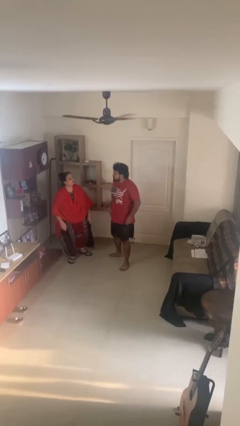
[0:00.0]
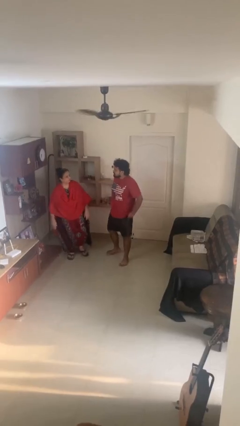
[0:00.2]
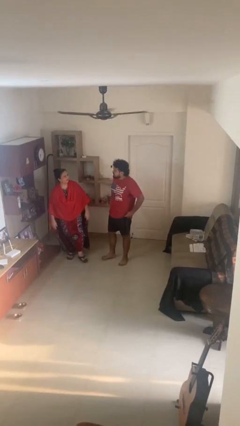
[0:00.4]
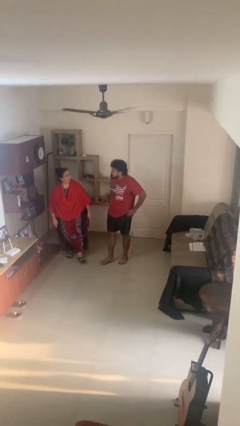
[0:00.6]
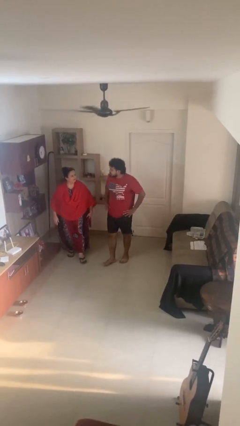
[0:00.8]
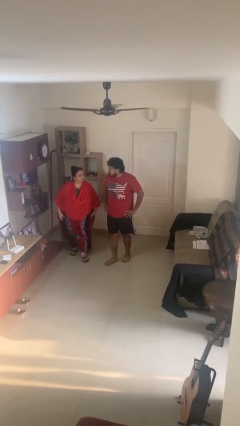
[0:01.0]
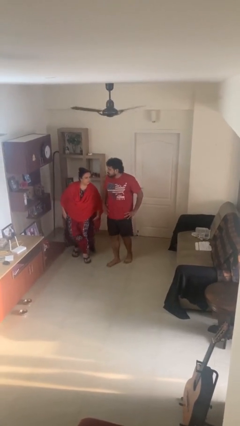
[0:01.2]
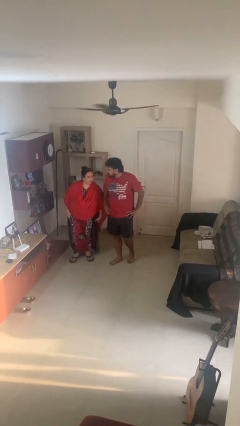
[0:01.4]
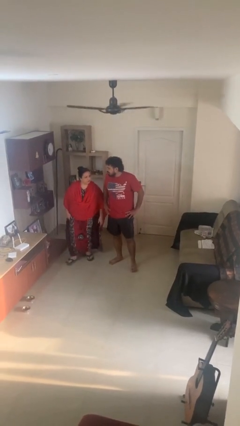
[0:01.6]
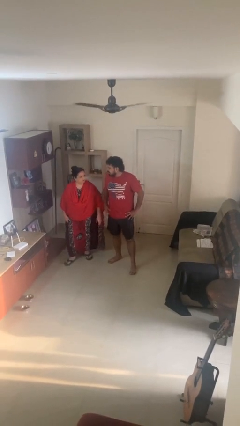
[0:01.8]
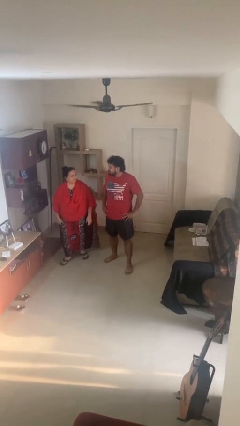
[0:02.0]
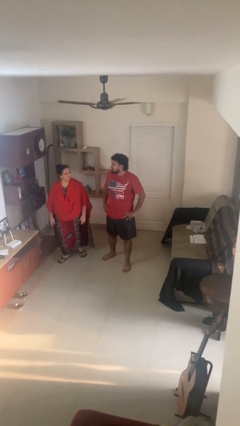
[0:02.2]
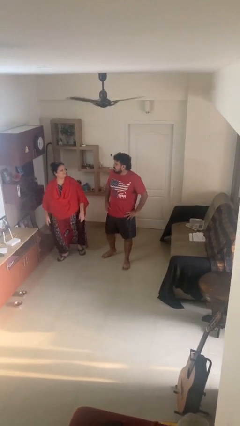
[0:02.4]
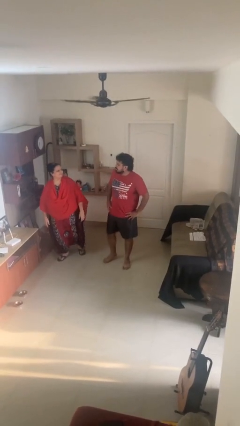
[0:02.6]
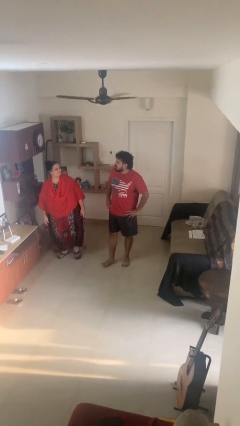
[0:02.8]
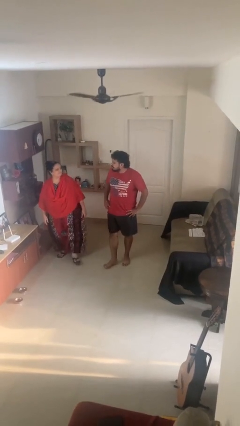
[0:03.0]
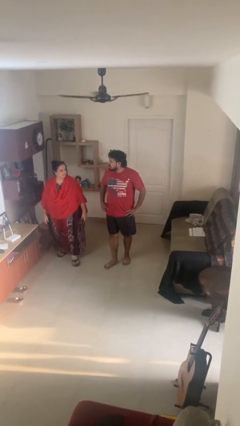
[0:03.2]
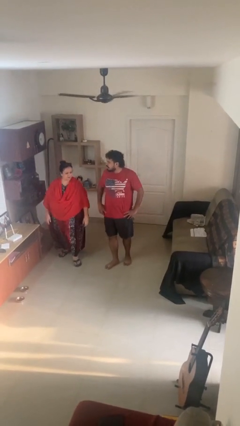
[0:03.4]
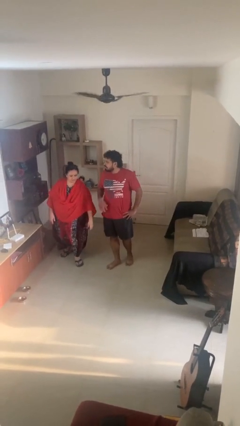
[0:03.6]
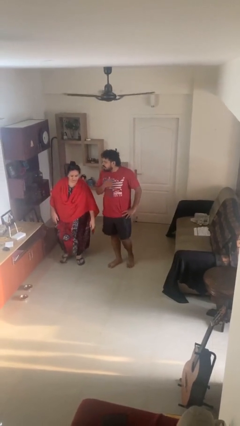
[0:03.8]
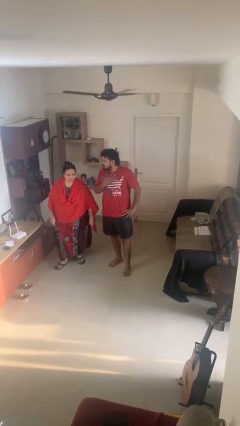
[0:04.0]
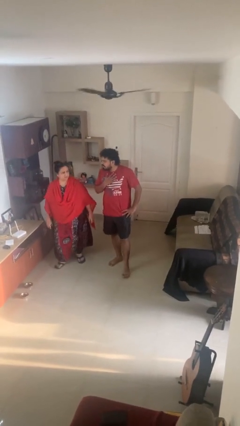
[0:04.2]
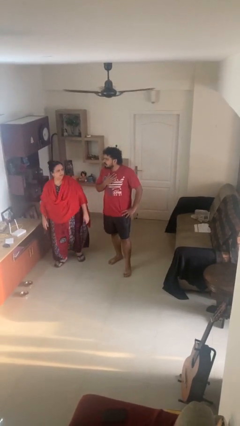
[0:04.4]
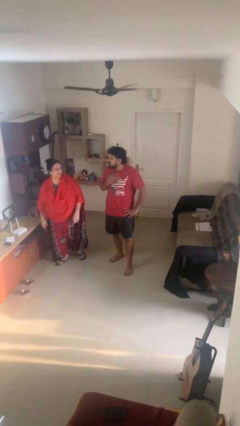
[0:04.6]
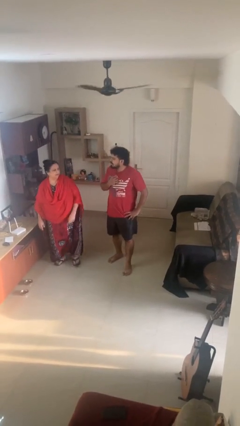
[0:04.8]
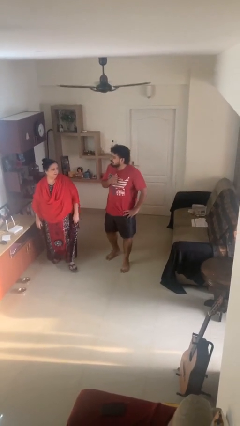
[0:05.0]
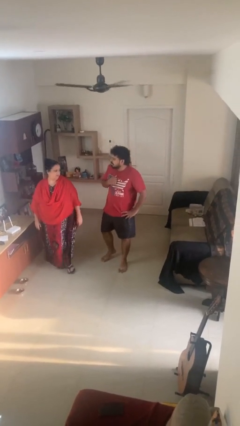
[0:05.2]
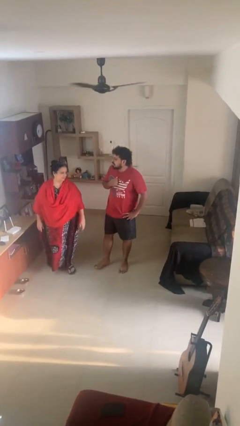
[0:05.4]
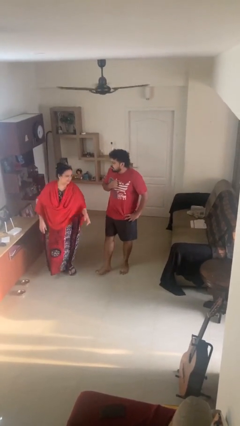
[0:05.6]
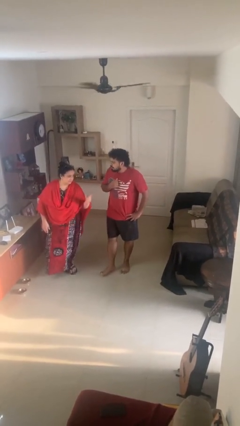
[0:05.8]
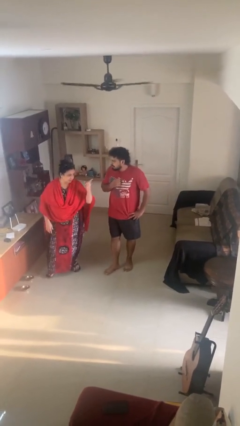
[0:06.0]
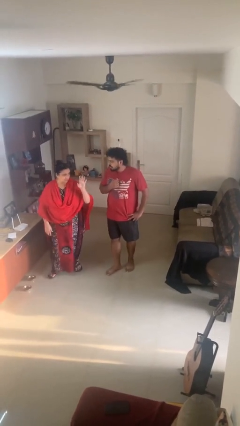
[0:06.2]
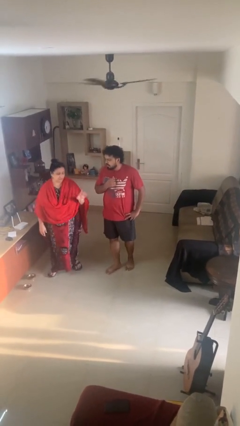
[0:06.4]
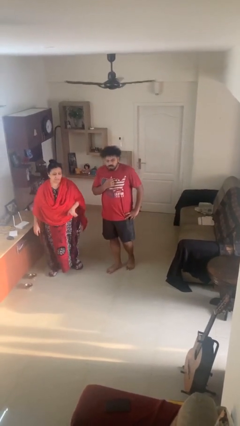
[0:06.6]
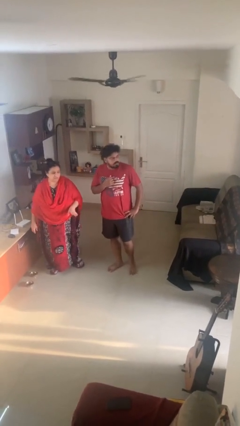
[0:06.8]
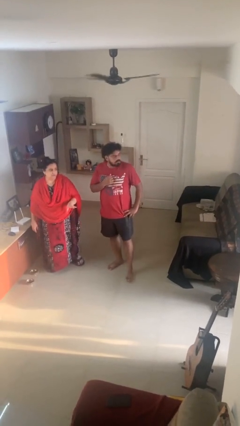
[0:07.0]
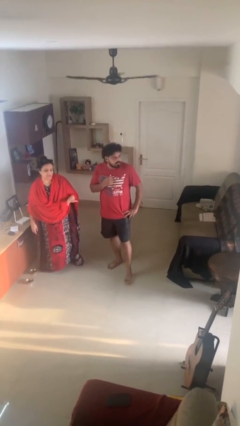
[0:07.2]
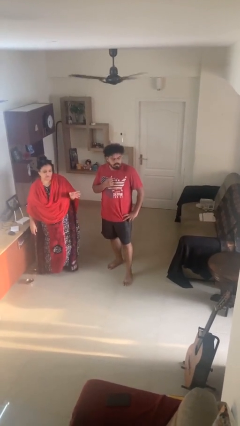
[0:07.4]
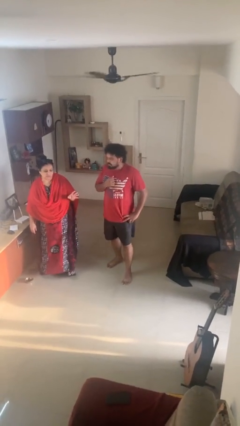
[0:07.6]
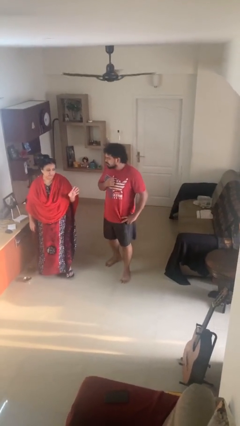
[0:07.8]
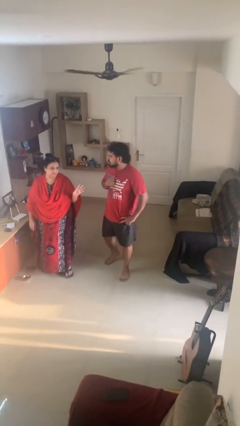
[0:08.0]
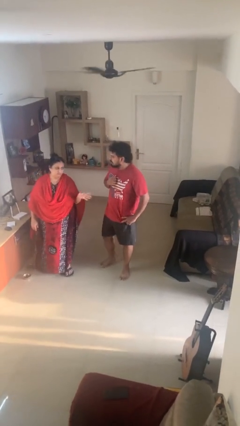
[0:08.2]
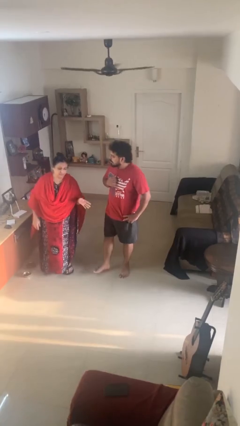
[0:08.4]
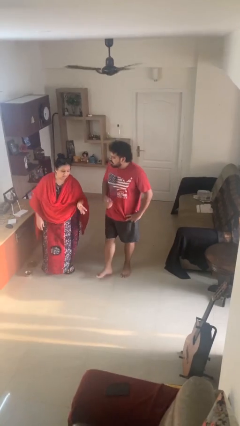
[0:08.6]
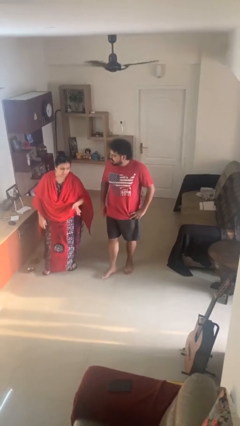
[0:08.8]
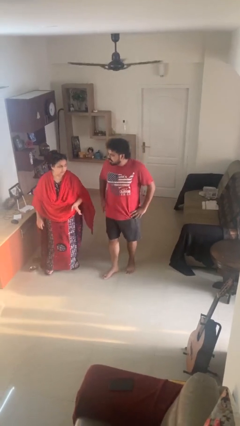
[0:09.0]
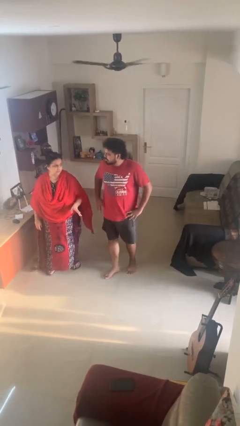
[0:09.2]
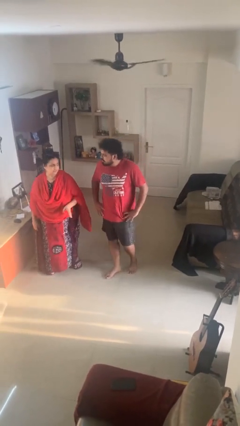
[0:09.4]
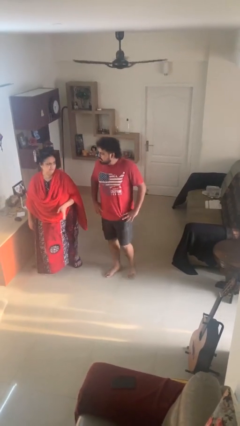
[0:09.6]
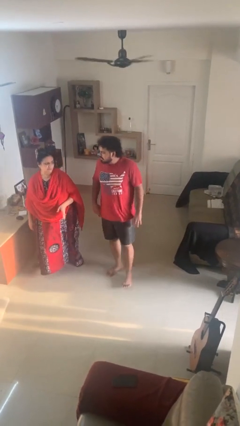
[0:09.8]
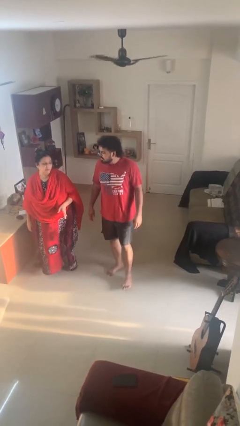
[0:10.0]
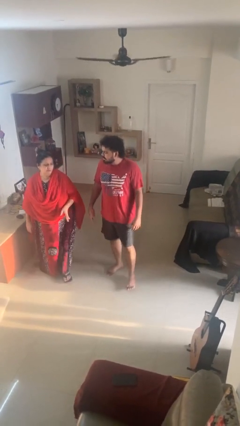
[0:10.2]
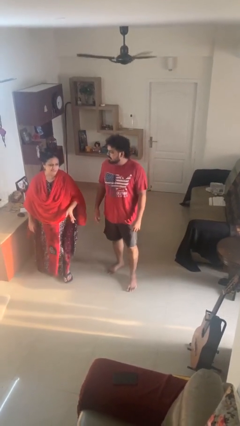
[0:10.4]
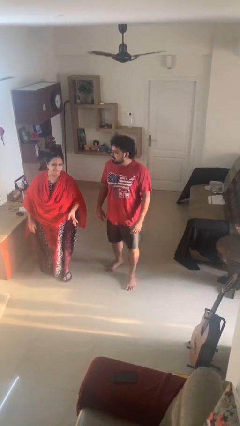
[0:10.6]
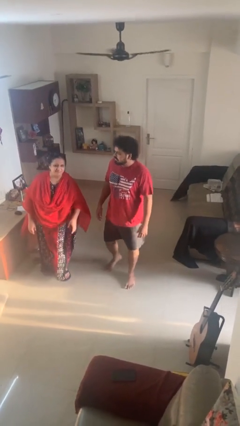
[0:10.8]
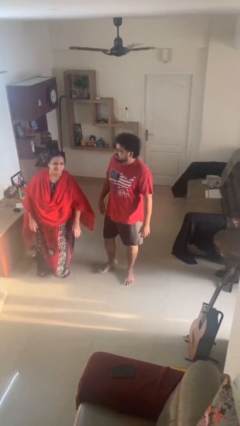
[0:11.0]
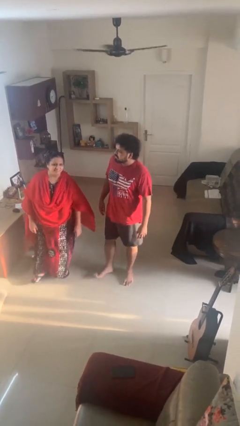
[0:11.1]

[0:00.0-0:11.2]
person talks to person

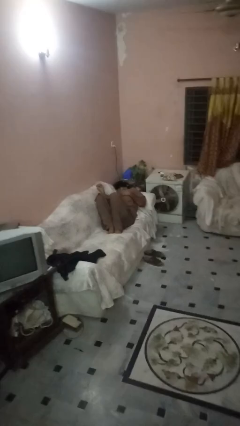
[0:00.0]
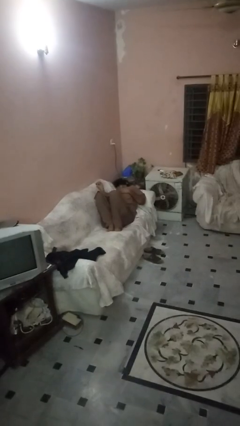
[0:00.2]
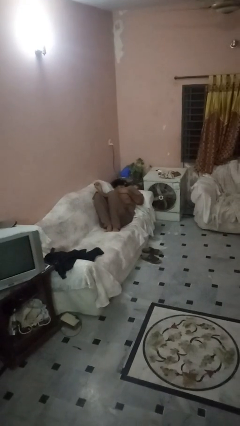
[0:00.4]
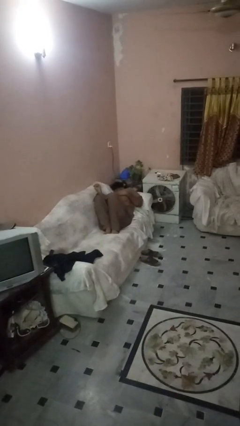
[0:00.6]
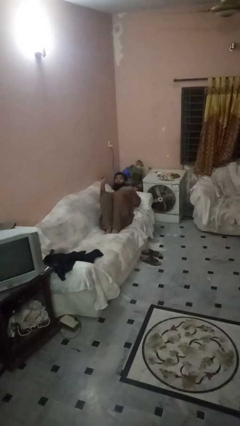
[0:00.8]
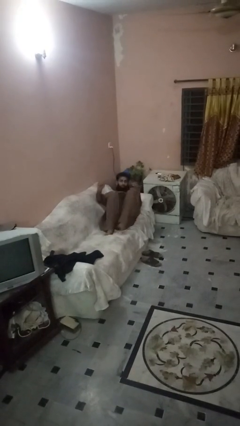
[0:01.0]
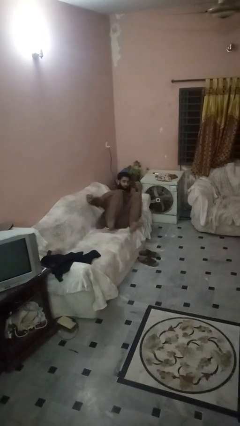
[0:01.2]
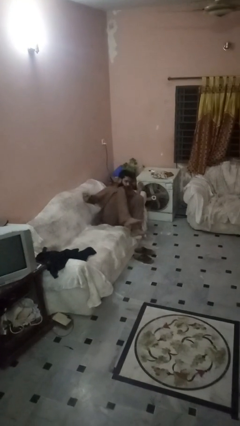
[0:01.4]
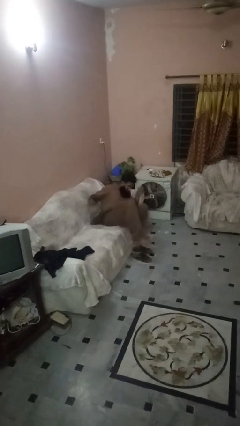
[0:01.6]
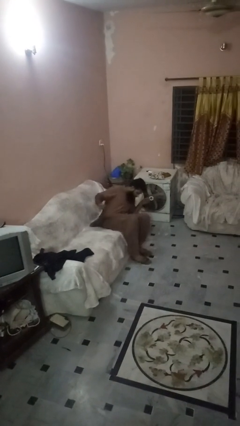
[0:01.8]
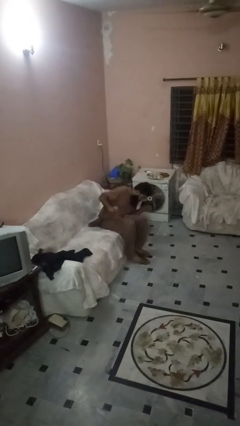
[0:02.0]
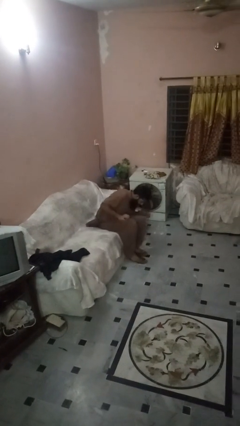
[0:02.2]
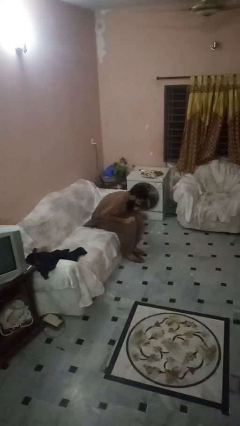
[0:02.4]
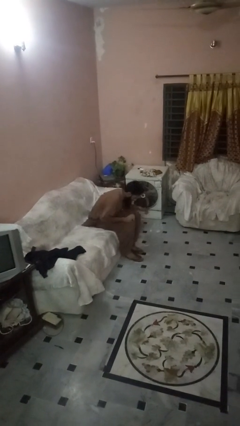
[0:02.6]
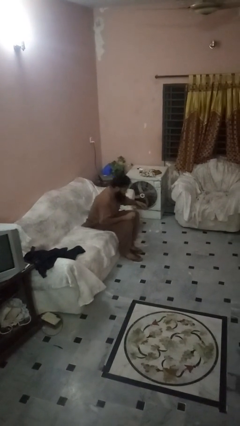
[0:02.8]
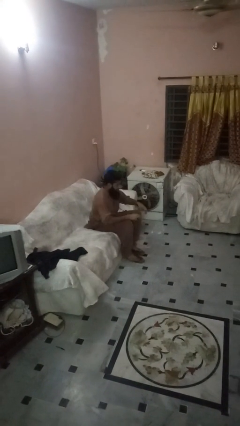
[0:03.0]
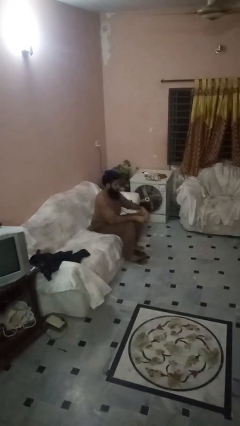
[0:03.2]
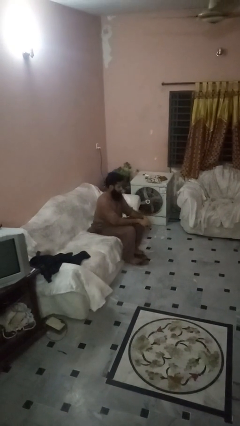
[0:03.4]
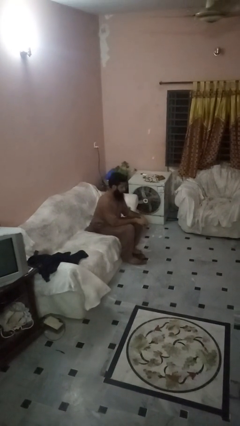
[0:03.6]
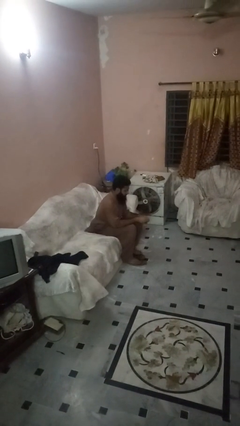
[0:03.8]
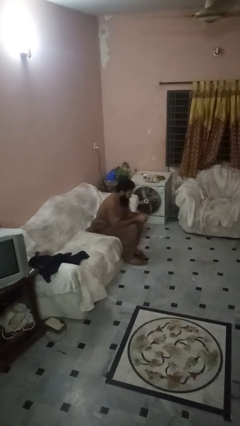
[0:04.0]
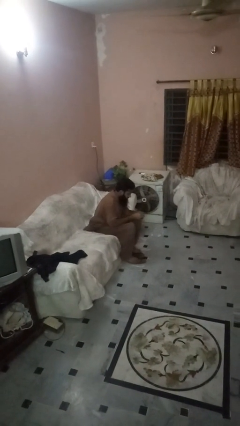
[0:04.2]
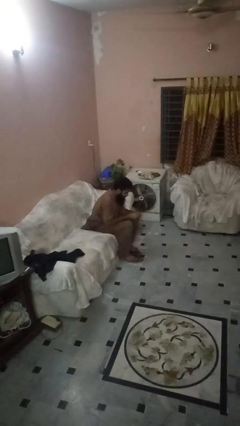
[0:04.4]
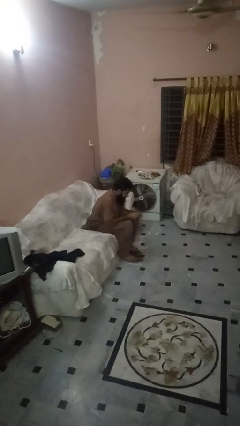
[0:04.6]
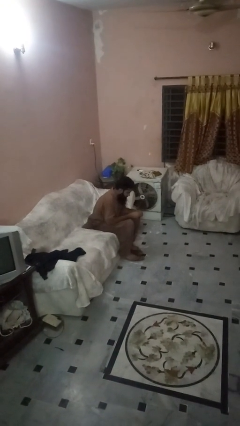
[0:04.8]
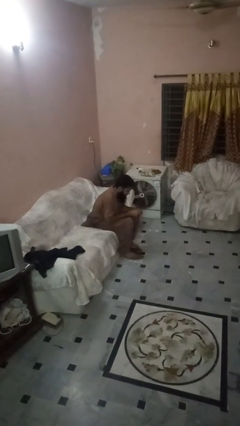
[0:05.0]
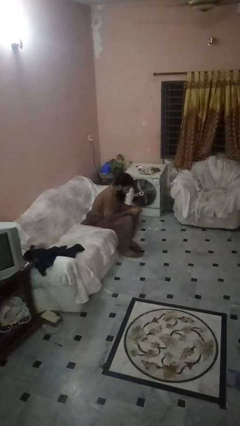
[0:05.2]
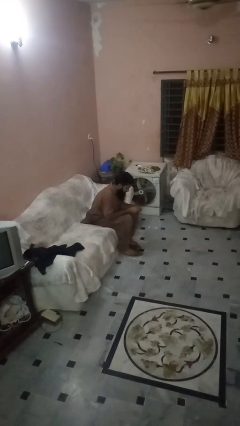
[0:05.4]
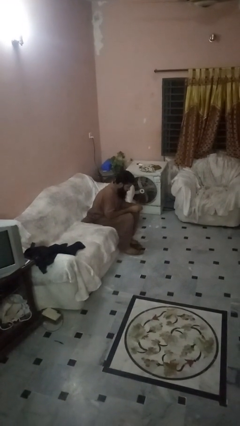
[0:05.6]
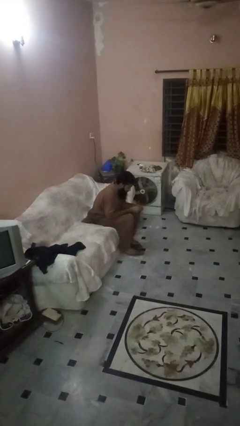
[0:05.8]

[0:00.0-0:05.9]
person stands up

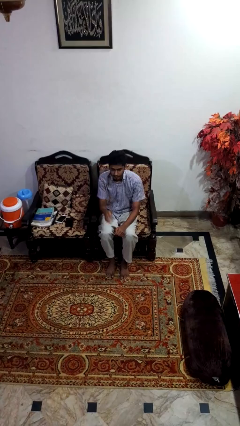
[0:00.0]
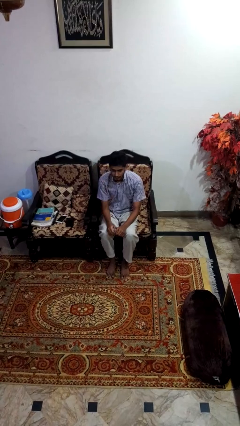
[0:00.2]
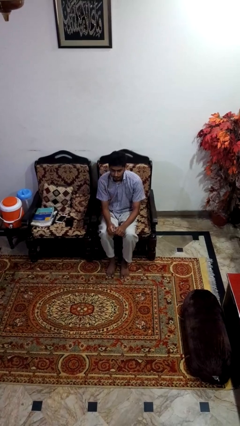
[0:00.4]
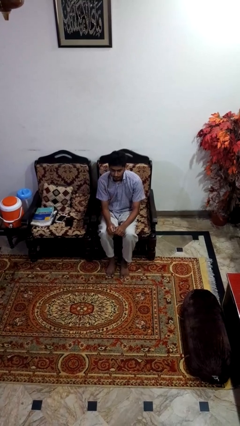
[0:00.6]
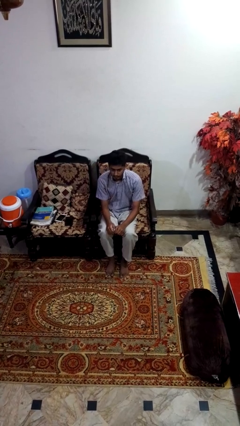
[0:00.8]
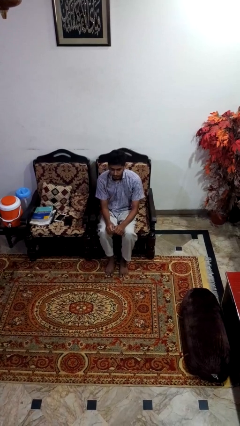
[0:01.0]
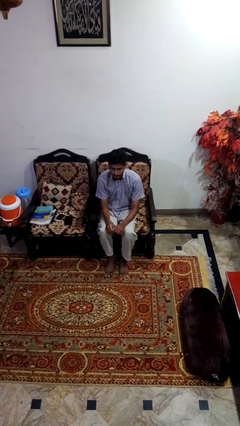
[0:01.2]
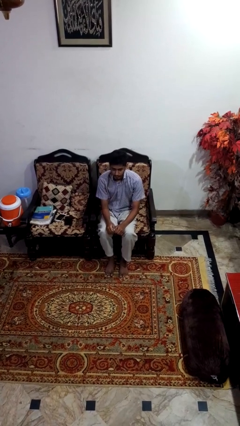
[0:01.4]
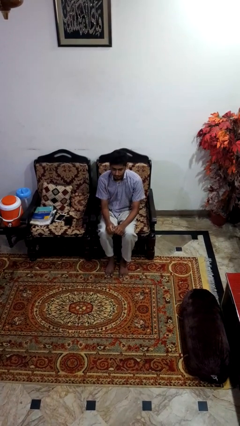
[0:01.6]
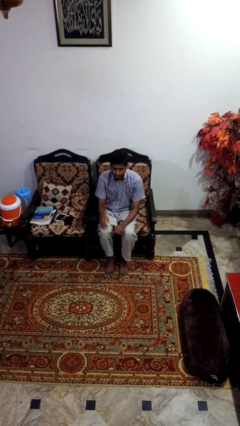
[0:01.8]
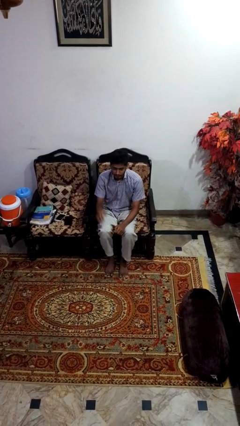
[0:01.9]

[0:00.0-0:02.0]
person gestures lower hand
